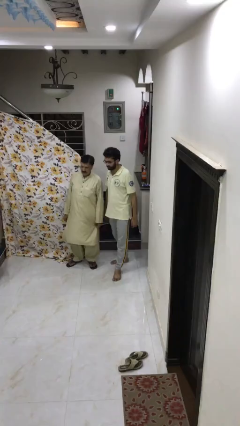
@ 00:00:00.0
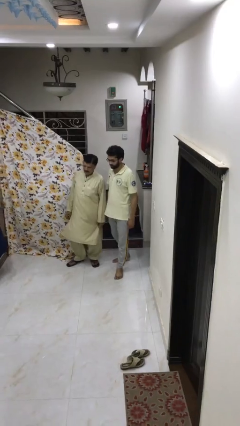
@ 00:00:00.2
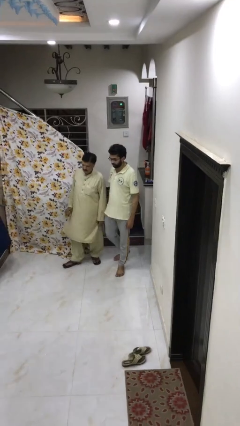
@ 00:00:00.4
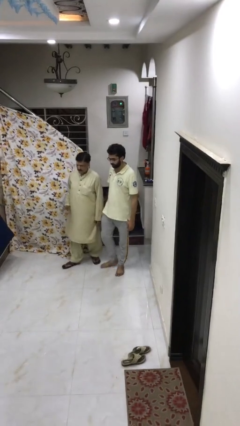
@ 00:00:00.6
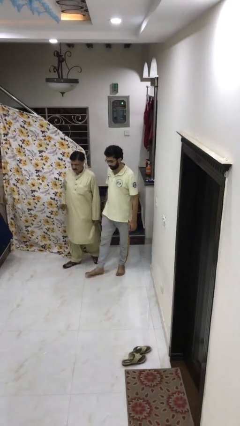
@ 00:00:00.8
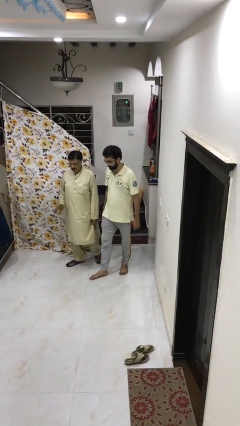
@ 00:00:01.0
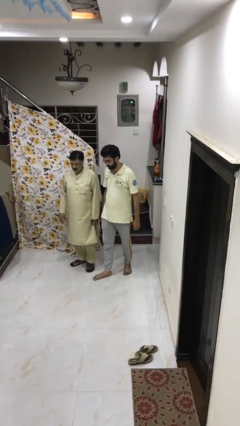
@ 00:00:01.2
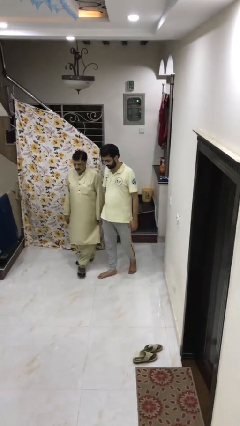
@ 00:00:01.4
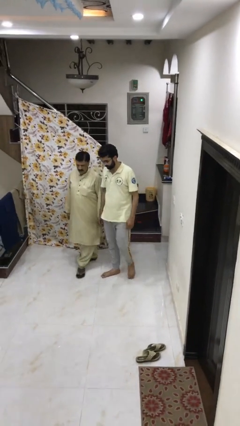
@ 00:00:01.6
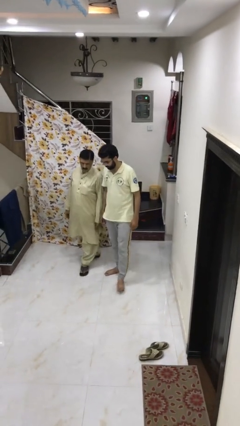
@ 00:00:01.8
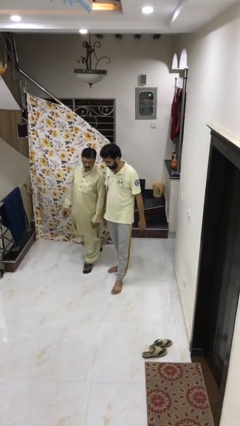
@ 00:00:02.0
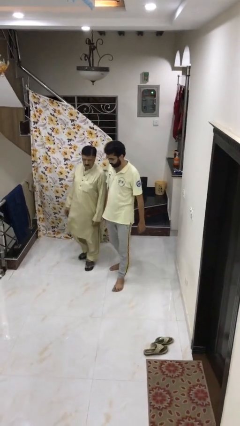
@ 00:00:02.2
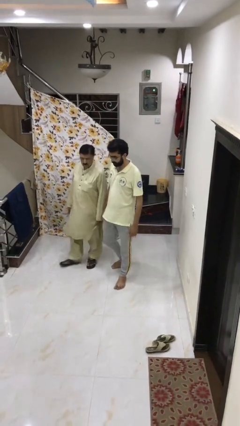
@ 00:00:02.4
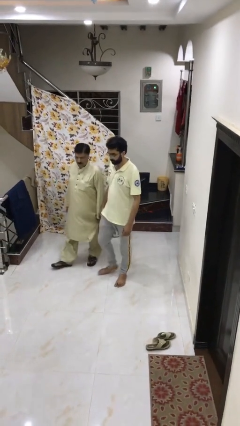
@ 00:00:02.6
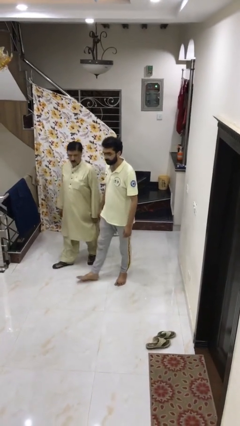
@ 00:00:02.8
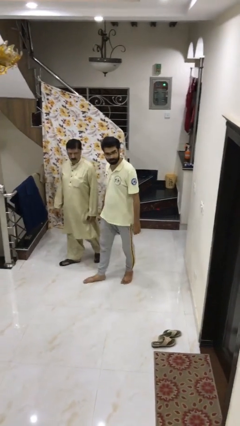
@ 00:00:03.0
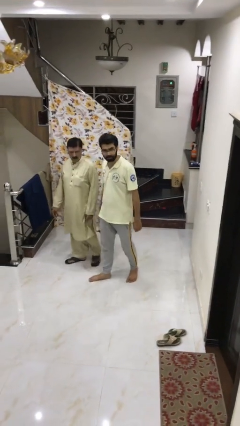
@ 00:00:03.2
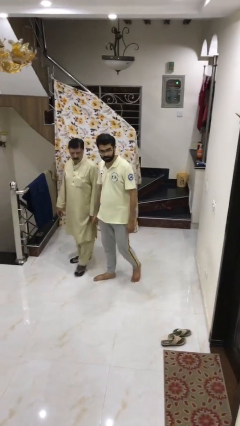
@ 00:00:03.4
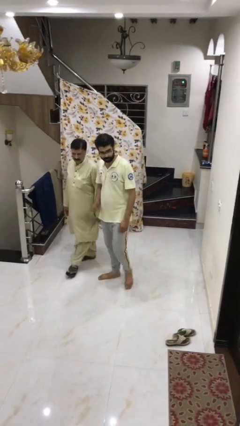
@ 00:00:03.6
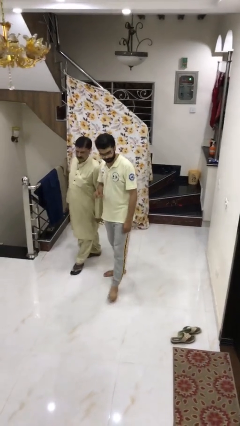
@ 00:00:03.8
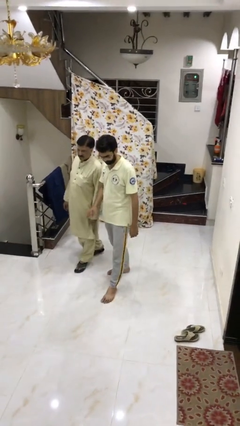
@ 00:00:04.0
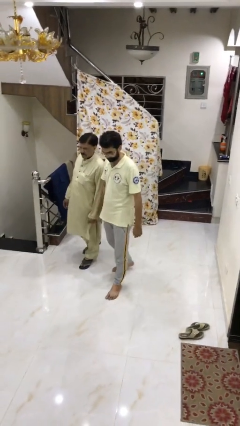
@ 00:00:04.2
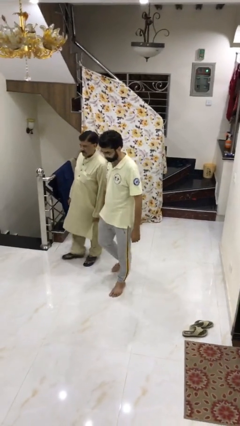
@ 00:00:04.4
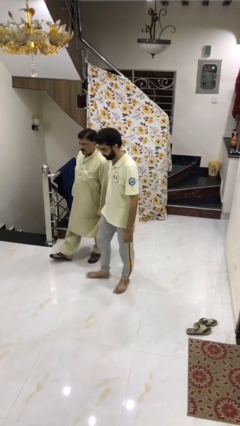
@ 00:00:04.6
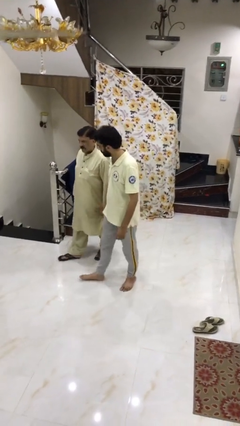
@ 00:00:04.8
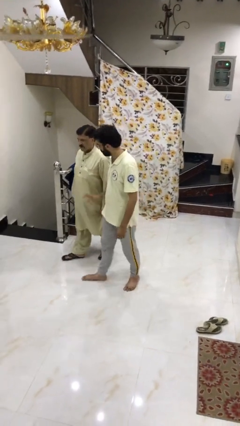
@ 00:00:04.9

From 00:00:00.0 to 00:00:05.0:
person talks to person

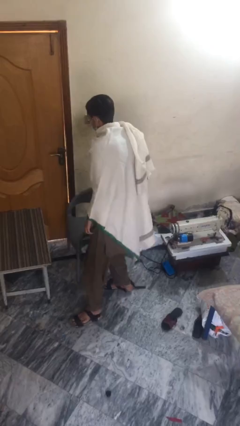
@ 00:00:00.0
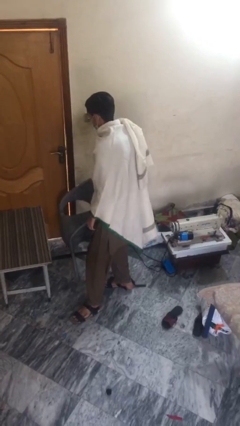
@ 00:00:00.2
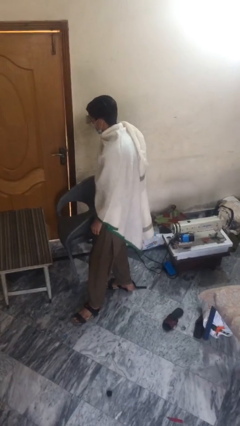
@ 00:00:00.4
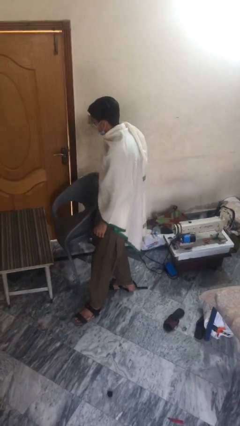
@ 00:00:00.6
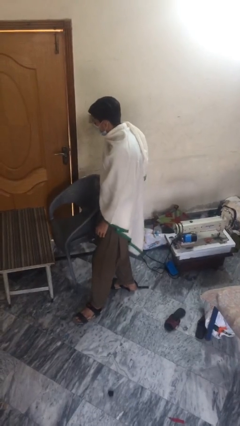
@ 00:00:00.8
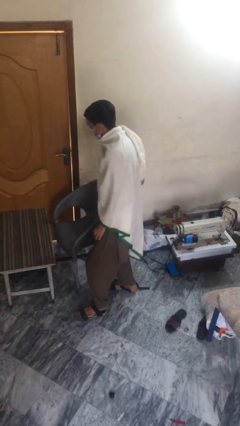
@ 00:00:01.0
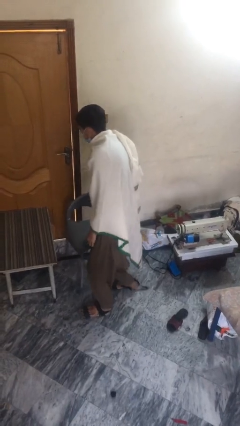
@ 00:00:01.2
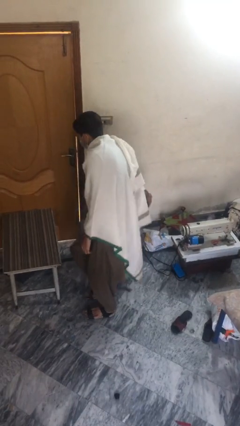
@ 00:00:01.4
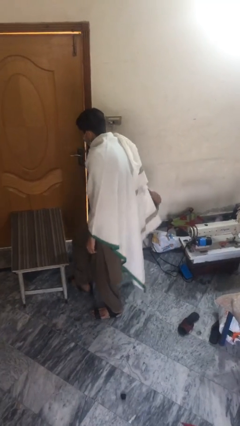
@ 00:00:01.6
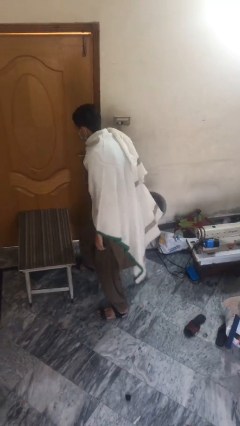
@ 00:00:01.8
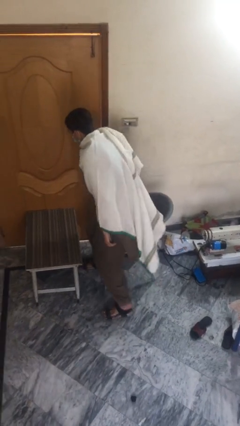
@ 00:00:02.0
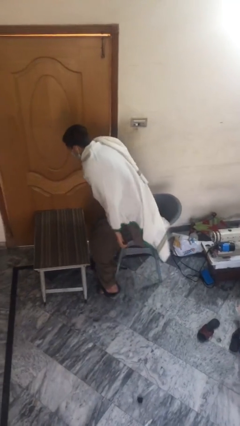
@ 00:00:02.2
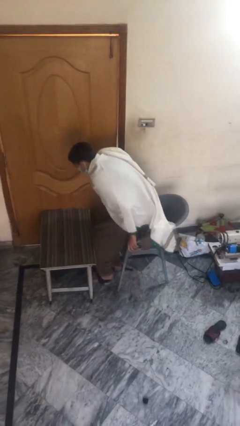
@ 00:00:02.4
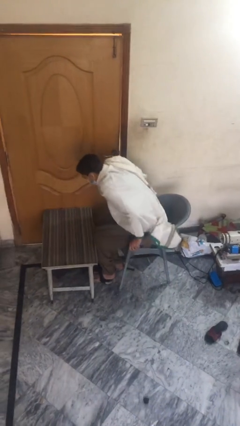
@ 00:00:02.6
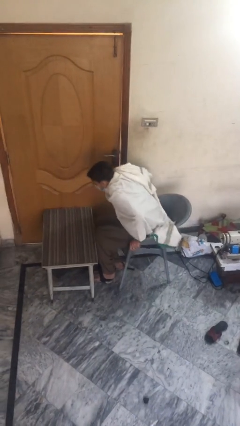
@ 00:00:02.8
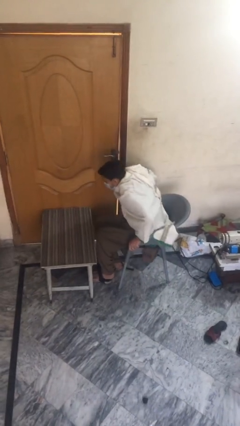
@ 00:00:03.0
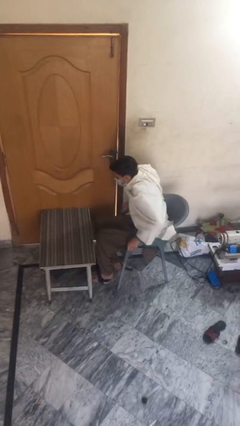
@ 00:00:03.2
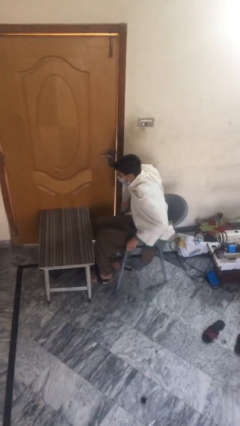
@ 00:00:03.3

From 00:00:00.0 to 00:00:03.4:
person sits down

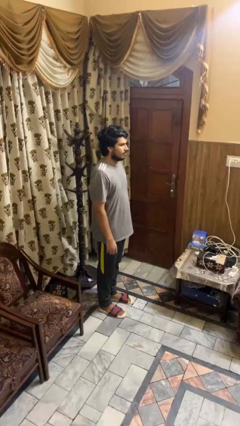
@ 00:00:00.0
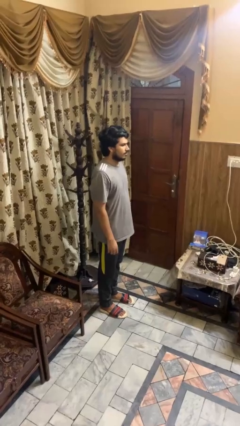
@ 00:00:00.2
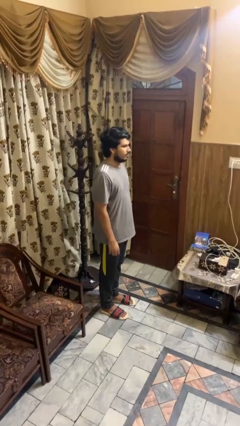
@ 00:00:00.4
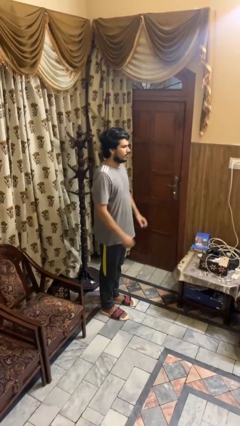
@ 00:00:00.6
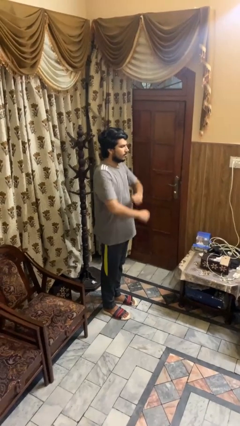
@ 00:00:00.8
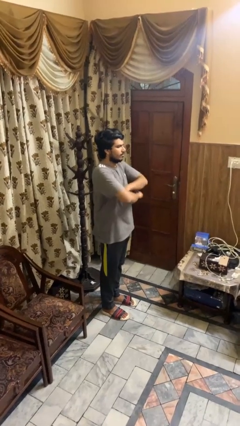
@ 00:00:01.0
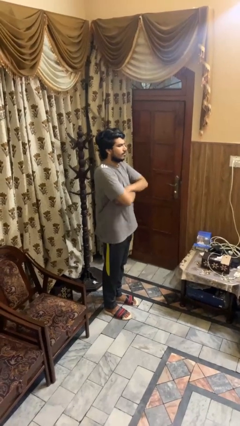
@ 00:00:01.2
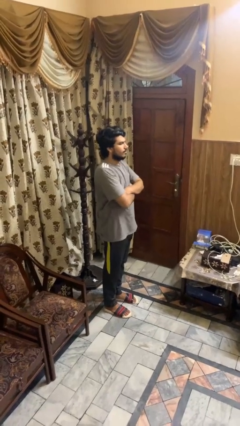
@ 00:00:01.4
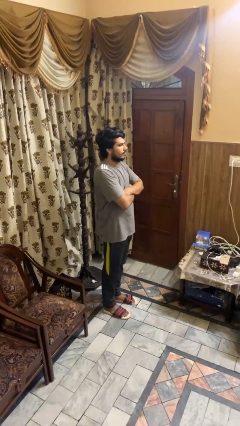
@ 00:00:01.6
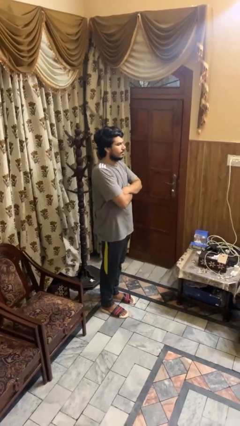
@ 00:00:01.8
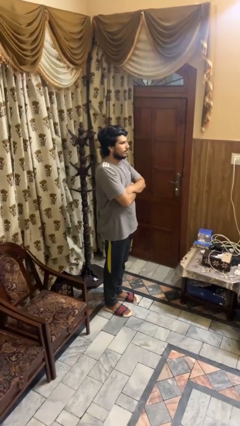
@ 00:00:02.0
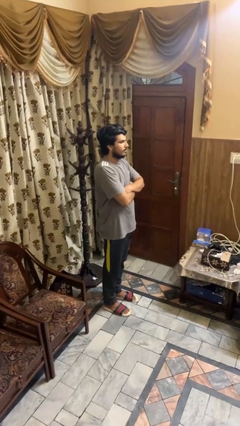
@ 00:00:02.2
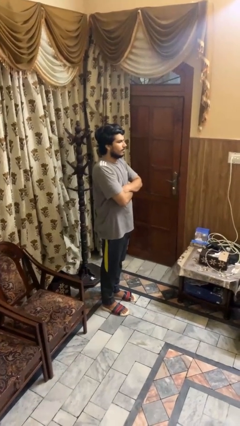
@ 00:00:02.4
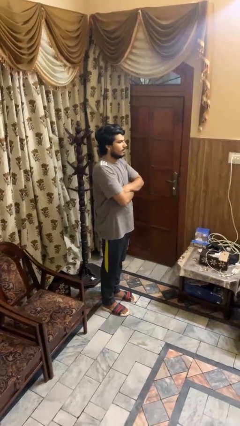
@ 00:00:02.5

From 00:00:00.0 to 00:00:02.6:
person crosses arms

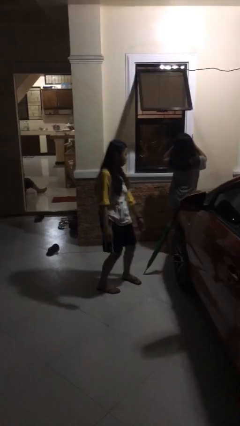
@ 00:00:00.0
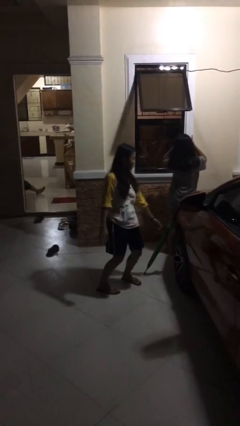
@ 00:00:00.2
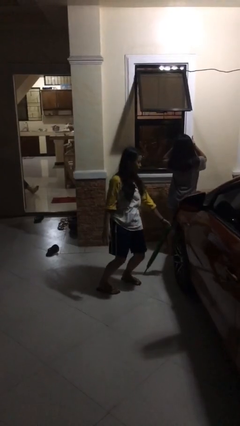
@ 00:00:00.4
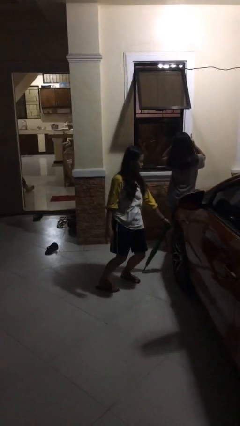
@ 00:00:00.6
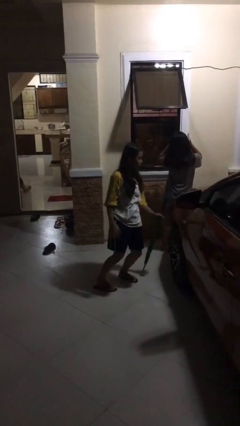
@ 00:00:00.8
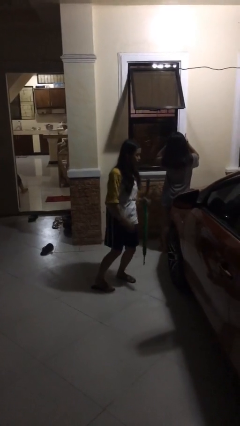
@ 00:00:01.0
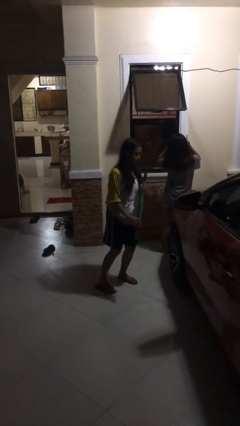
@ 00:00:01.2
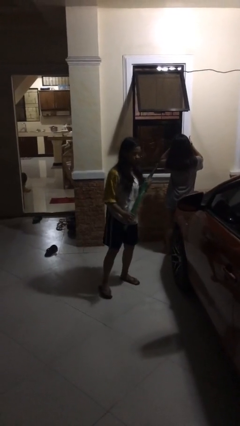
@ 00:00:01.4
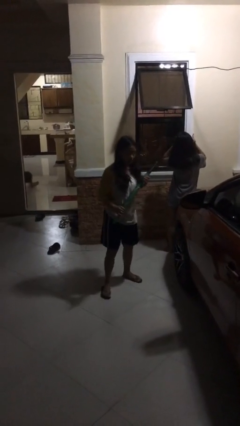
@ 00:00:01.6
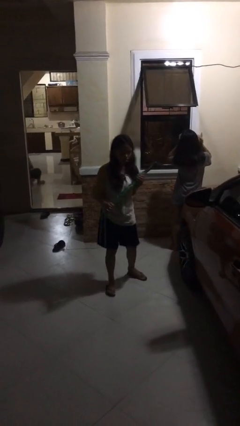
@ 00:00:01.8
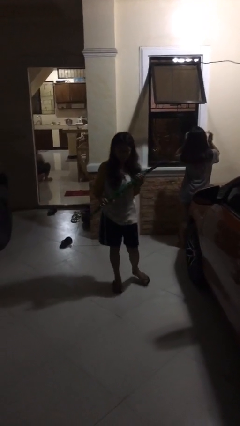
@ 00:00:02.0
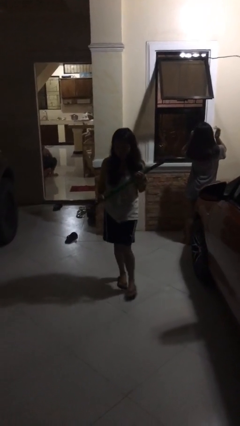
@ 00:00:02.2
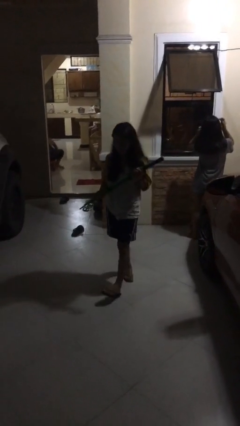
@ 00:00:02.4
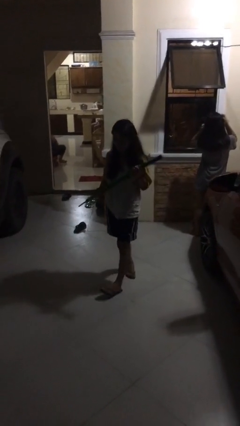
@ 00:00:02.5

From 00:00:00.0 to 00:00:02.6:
person steals object from person

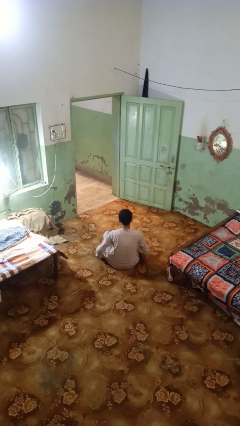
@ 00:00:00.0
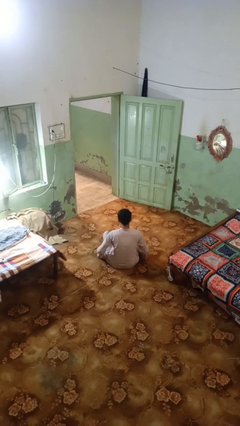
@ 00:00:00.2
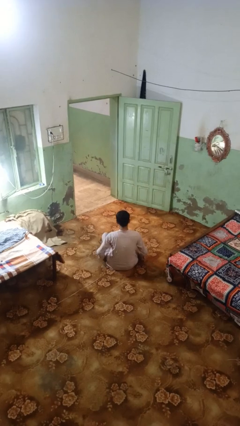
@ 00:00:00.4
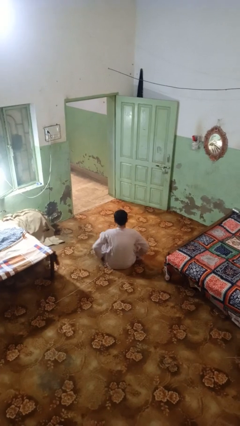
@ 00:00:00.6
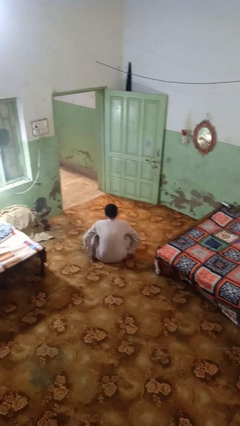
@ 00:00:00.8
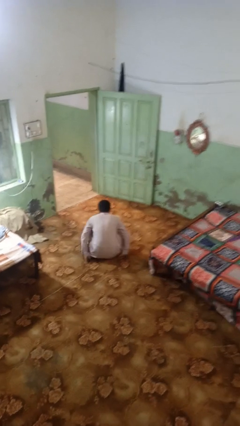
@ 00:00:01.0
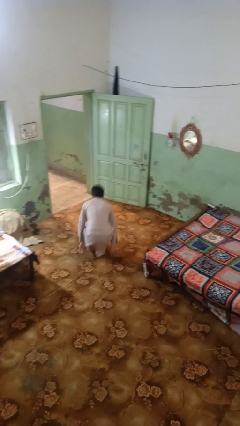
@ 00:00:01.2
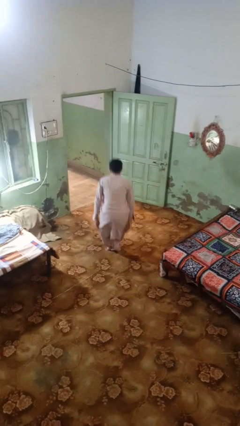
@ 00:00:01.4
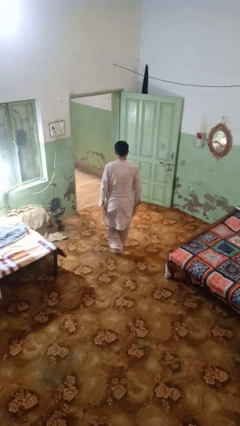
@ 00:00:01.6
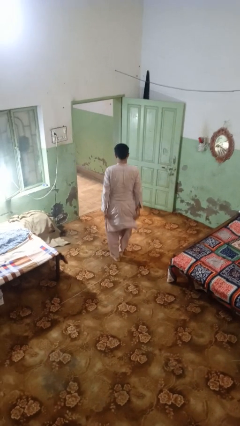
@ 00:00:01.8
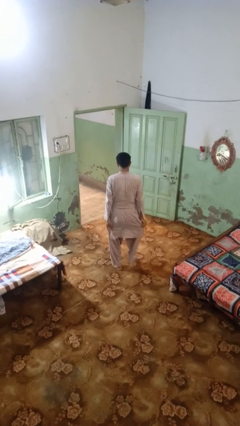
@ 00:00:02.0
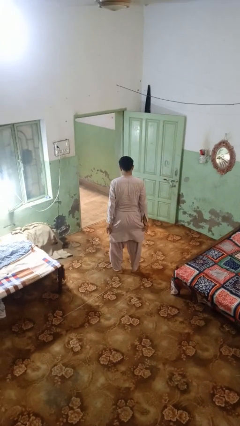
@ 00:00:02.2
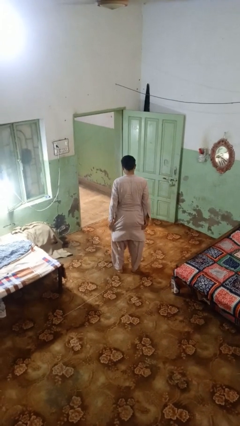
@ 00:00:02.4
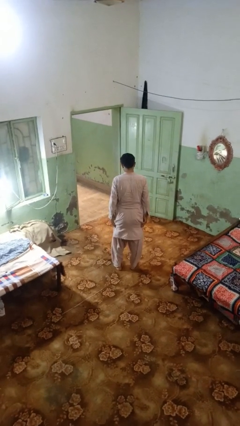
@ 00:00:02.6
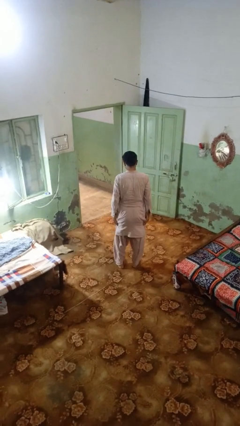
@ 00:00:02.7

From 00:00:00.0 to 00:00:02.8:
person stands up from floor

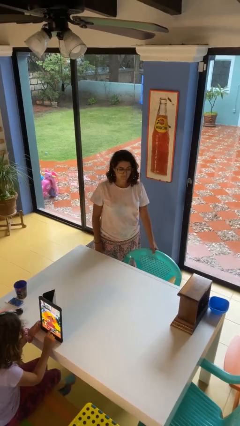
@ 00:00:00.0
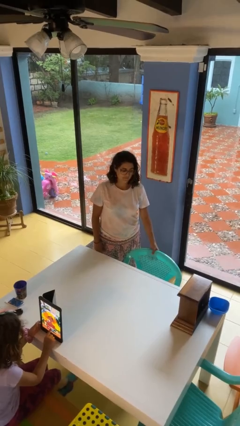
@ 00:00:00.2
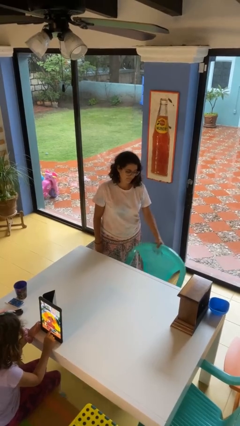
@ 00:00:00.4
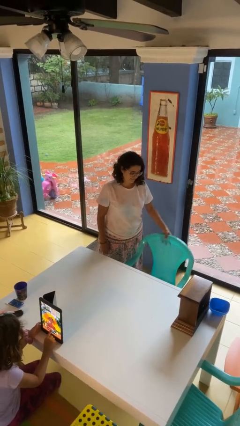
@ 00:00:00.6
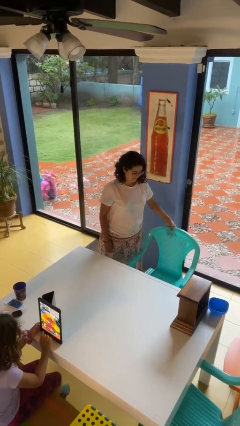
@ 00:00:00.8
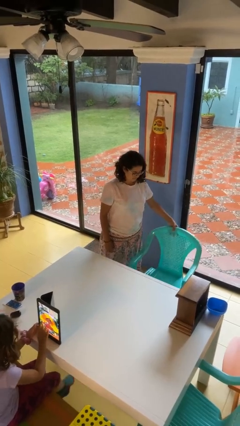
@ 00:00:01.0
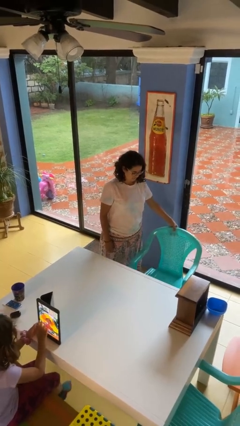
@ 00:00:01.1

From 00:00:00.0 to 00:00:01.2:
person pulls out chair
